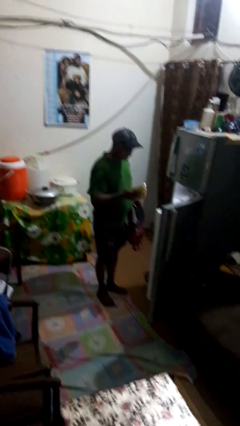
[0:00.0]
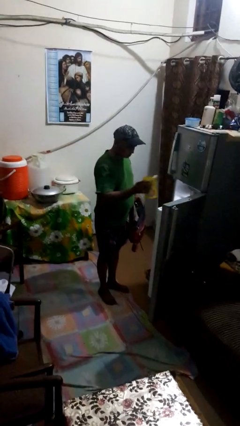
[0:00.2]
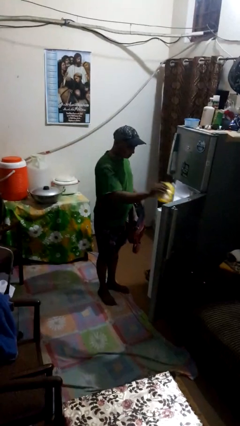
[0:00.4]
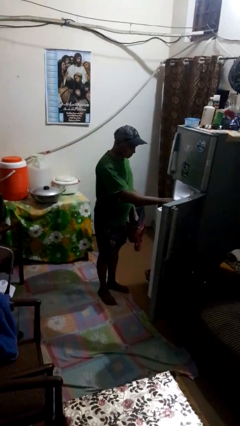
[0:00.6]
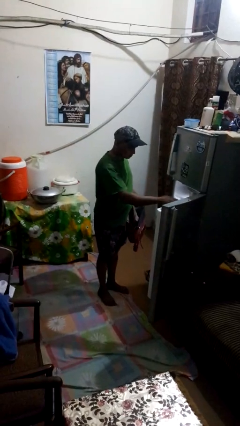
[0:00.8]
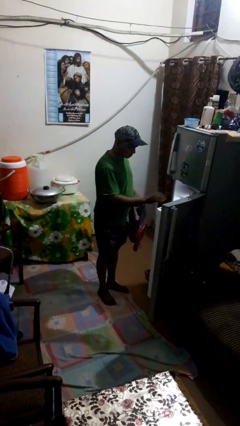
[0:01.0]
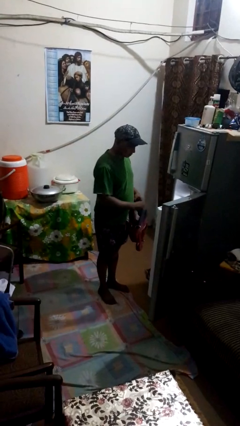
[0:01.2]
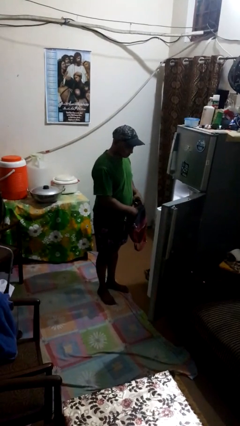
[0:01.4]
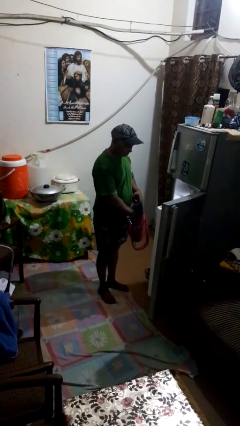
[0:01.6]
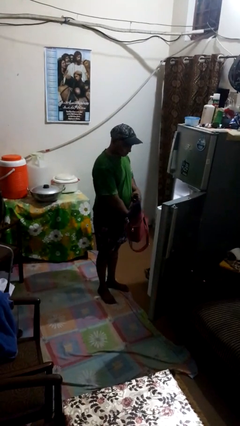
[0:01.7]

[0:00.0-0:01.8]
person loads groceries into refrigerator

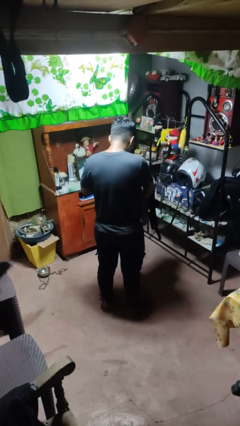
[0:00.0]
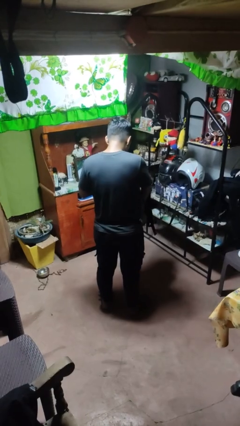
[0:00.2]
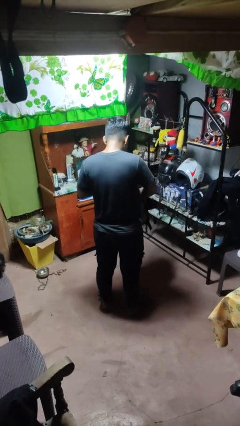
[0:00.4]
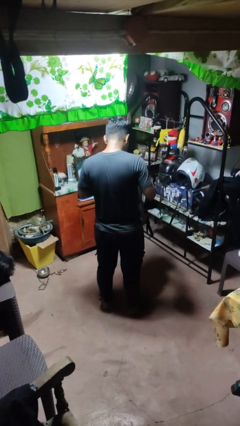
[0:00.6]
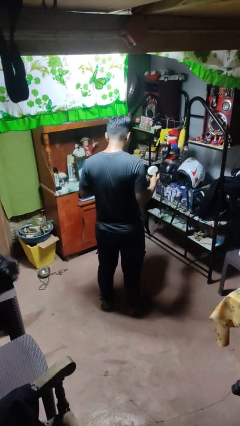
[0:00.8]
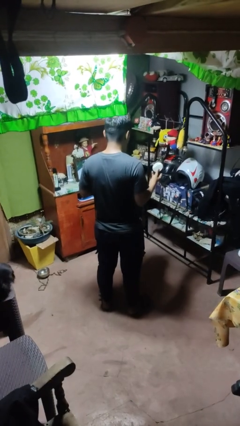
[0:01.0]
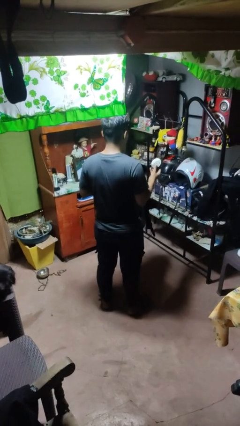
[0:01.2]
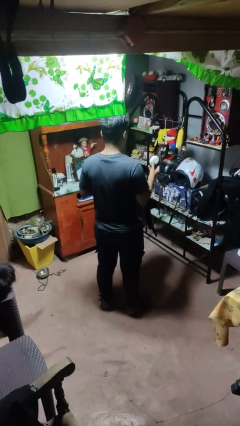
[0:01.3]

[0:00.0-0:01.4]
person takes object from bag

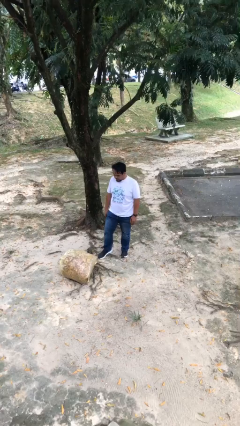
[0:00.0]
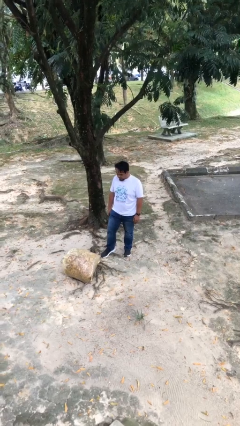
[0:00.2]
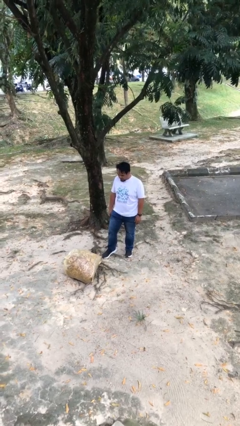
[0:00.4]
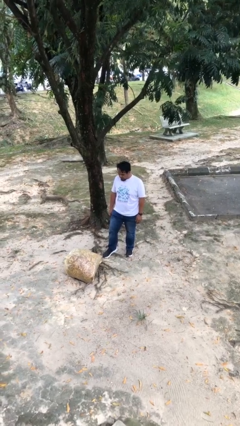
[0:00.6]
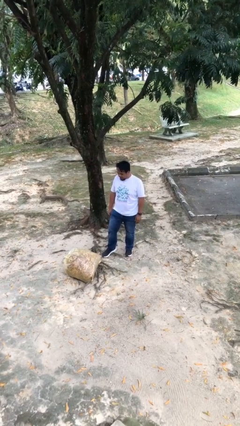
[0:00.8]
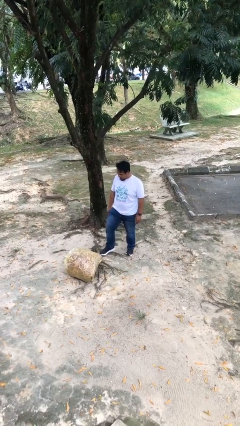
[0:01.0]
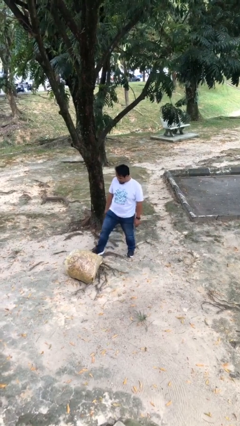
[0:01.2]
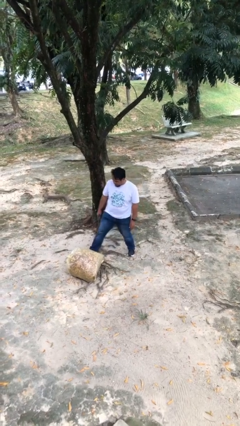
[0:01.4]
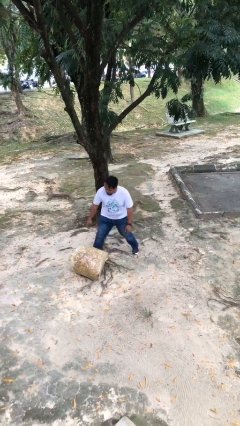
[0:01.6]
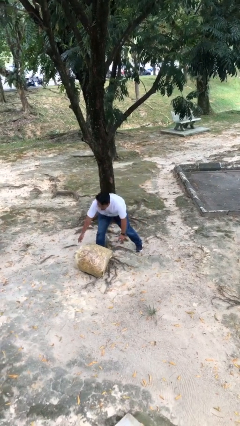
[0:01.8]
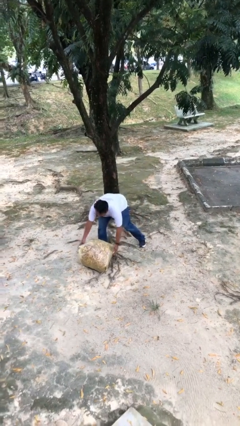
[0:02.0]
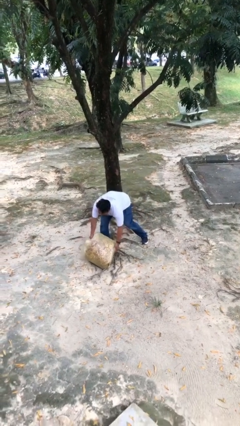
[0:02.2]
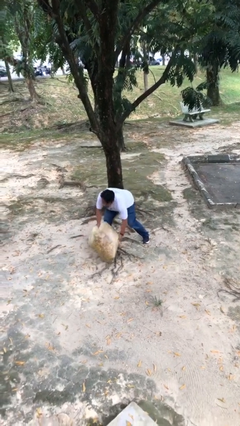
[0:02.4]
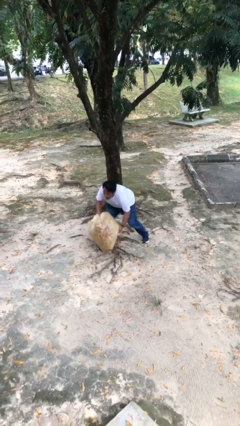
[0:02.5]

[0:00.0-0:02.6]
person picks up object from floor

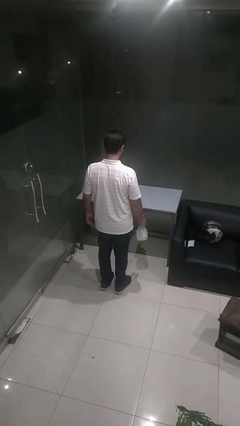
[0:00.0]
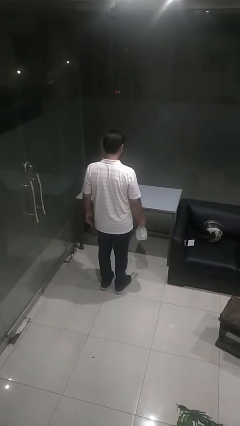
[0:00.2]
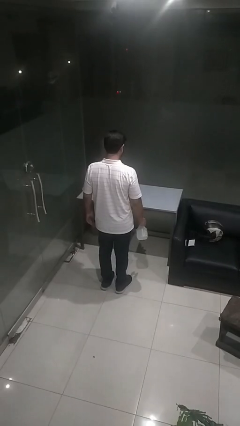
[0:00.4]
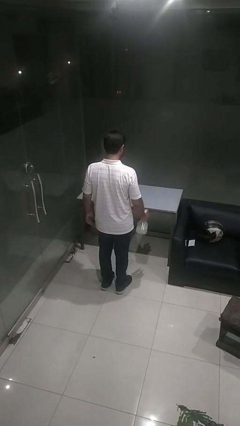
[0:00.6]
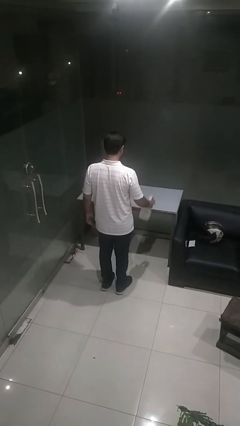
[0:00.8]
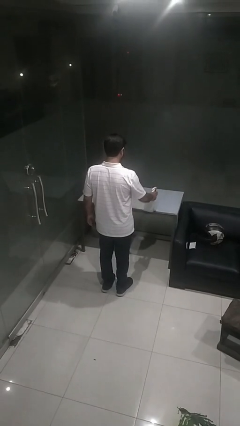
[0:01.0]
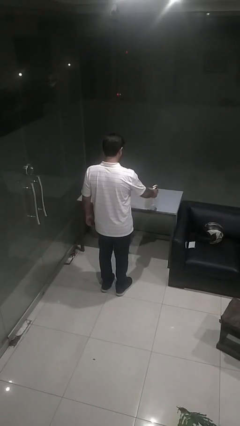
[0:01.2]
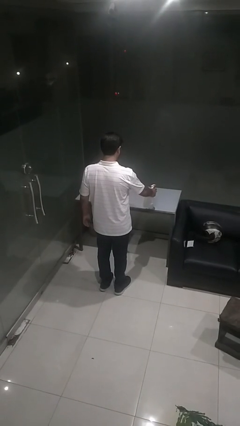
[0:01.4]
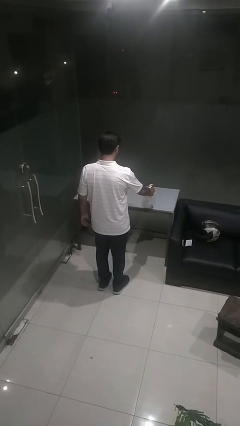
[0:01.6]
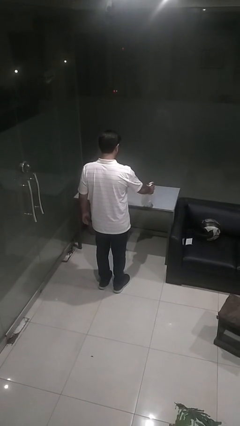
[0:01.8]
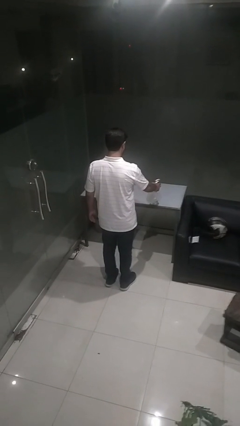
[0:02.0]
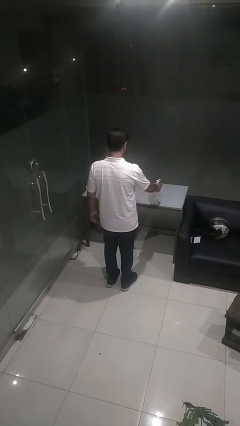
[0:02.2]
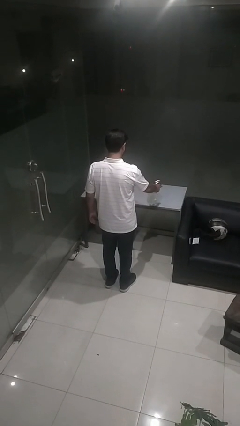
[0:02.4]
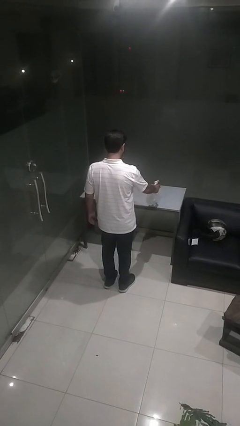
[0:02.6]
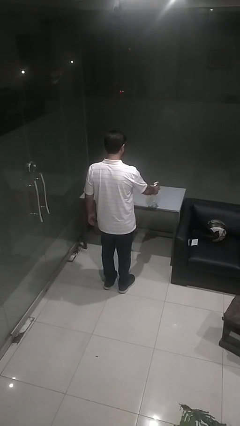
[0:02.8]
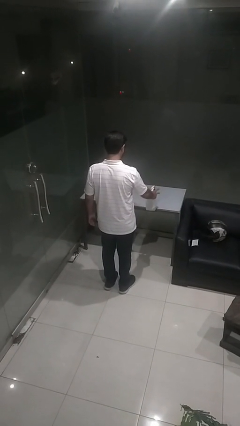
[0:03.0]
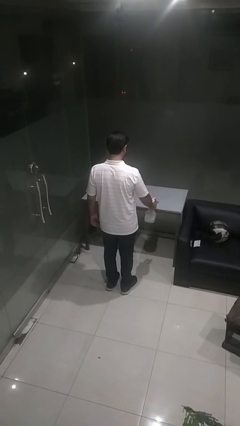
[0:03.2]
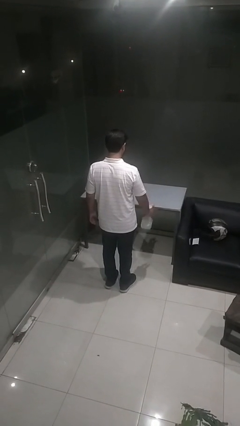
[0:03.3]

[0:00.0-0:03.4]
person sprays from bottle

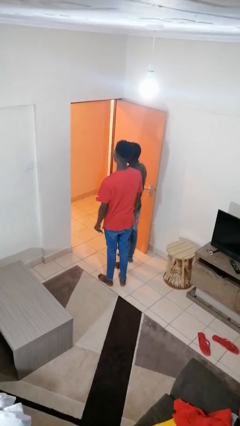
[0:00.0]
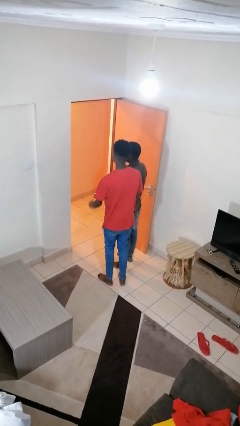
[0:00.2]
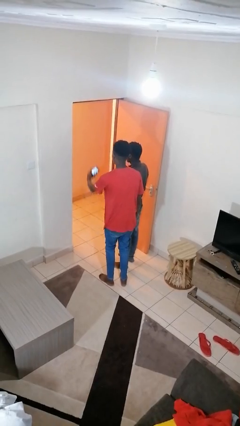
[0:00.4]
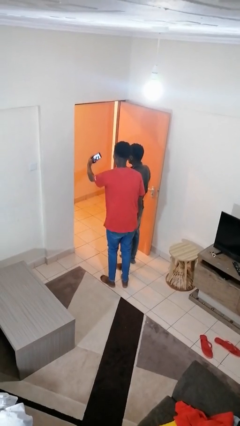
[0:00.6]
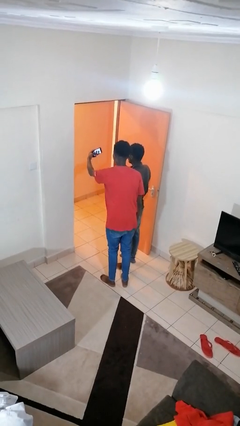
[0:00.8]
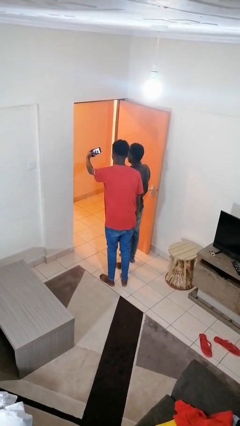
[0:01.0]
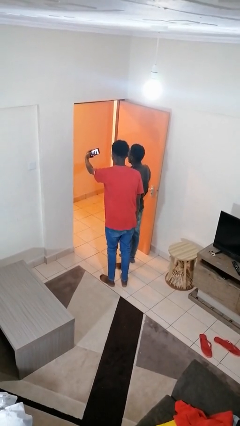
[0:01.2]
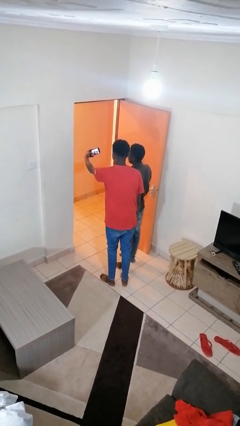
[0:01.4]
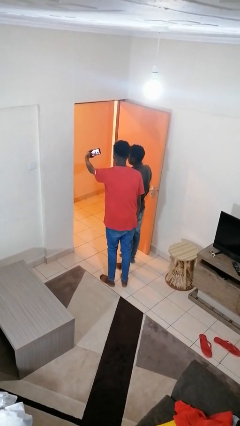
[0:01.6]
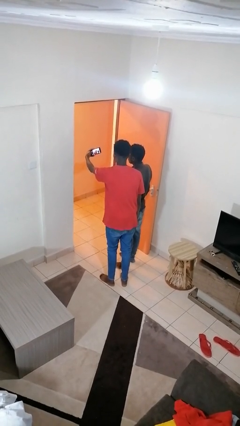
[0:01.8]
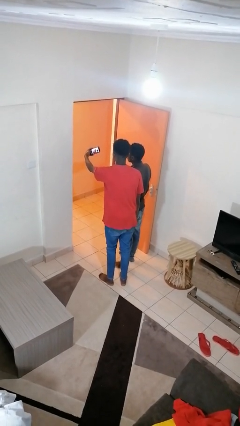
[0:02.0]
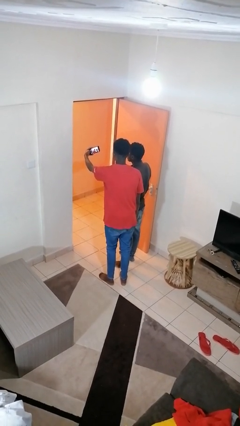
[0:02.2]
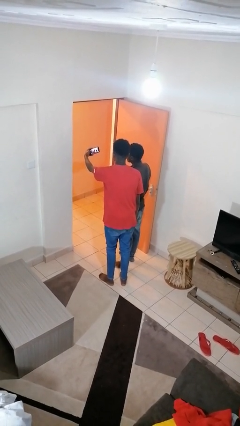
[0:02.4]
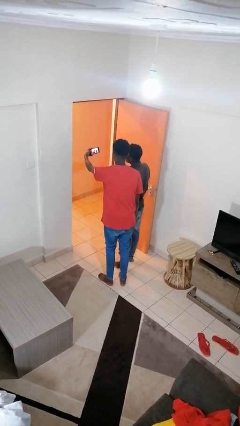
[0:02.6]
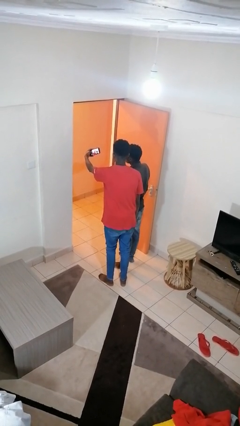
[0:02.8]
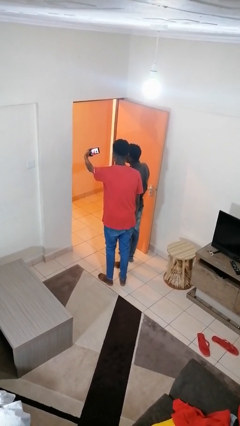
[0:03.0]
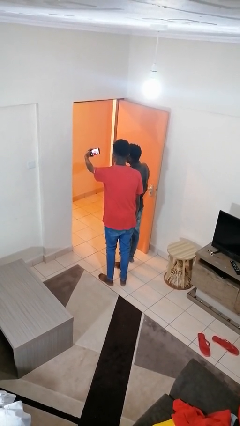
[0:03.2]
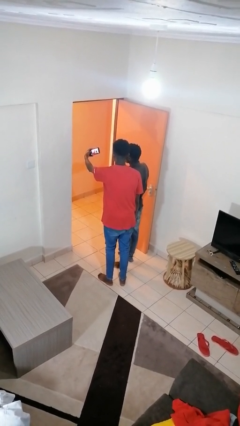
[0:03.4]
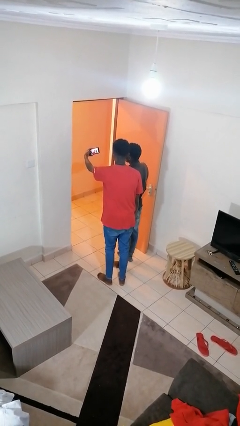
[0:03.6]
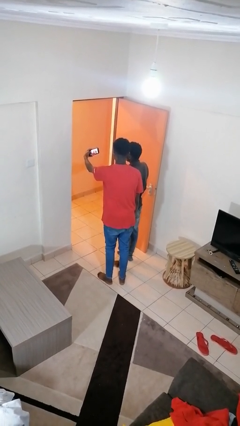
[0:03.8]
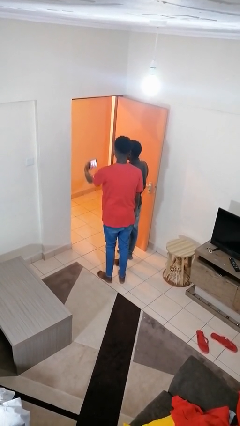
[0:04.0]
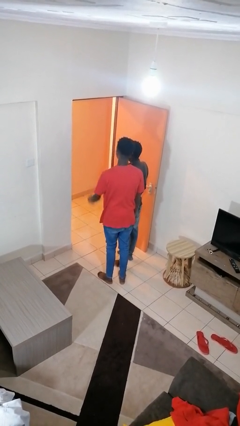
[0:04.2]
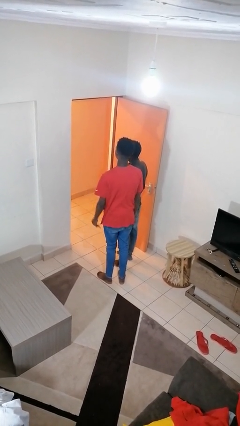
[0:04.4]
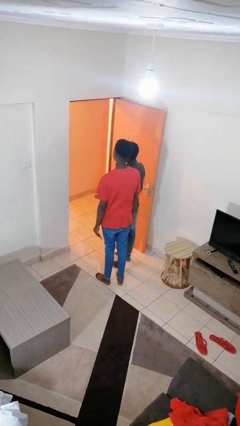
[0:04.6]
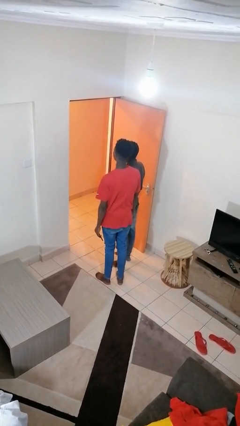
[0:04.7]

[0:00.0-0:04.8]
person takes selfie with person

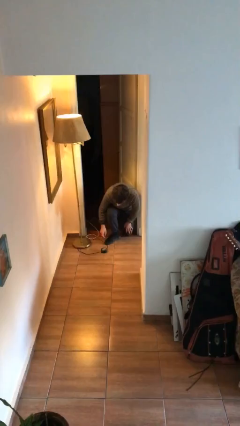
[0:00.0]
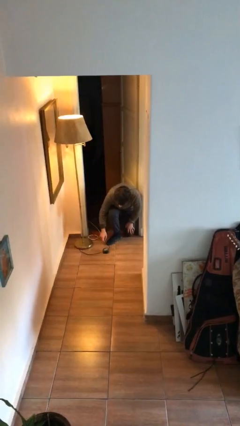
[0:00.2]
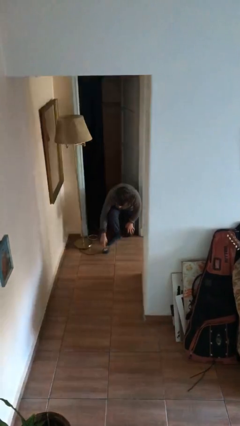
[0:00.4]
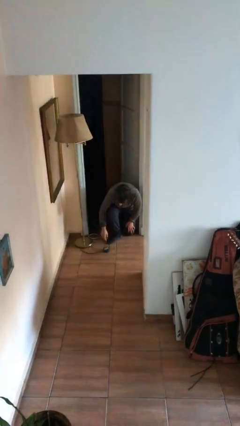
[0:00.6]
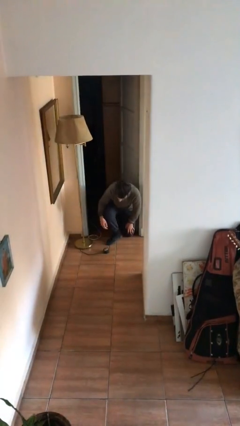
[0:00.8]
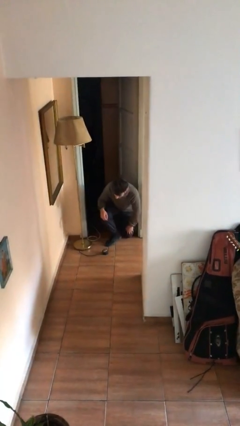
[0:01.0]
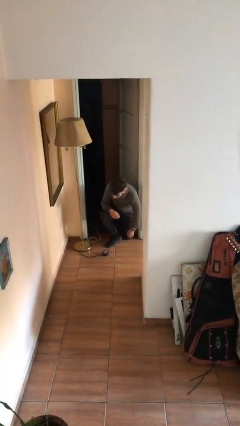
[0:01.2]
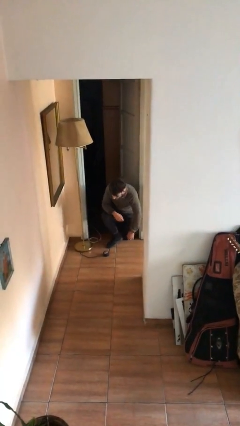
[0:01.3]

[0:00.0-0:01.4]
person turns off lamp

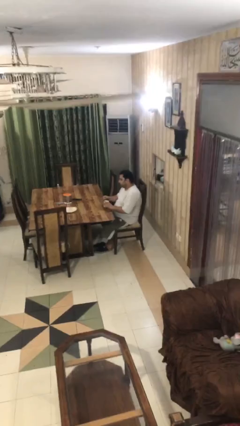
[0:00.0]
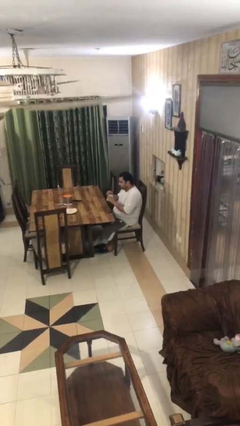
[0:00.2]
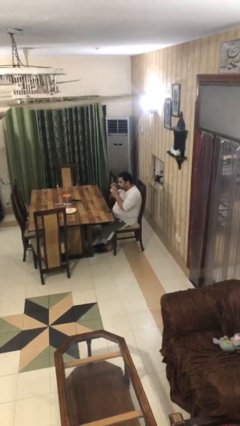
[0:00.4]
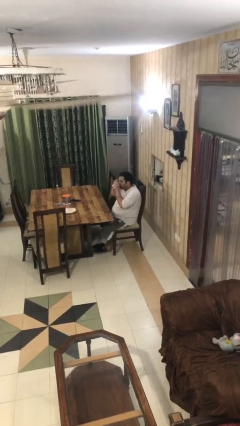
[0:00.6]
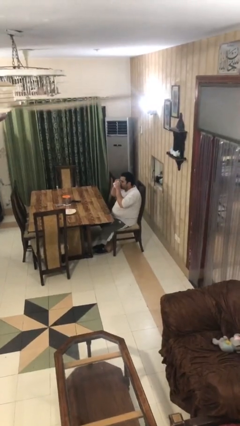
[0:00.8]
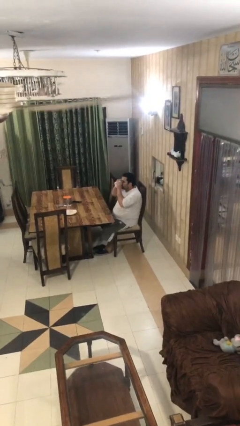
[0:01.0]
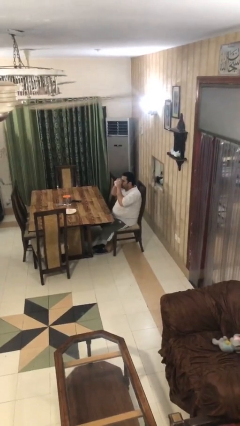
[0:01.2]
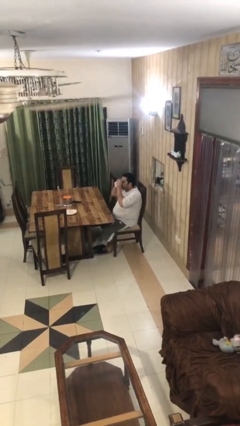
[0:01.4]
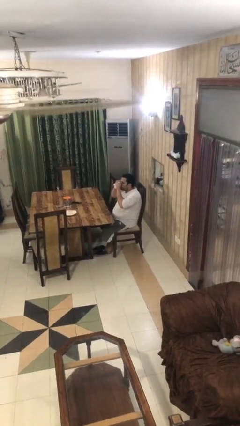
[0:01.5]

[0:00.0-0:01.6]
person drinks from mug
